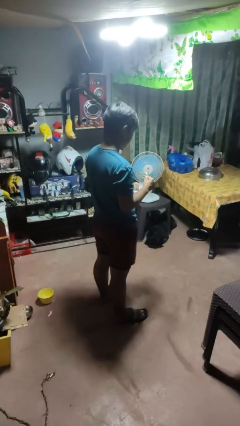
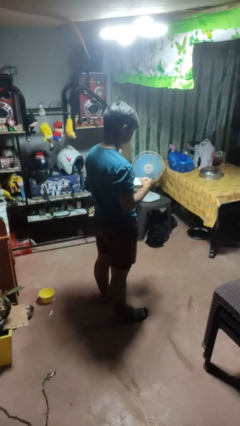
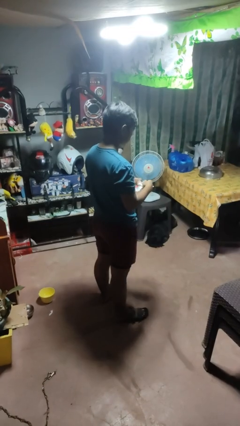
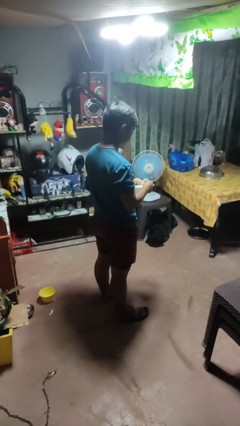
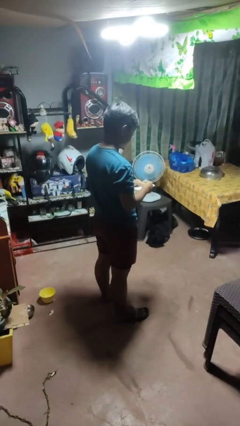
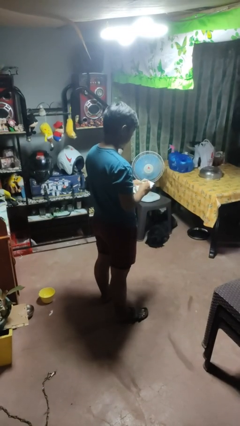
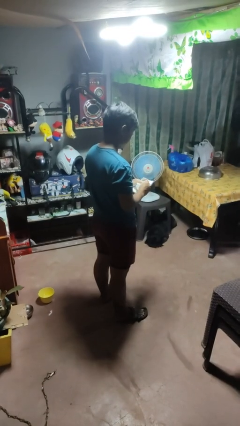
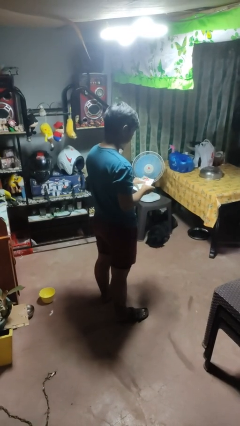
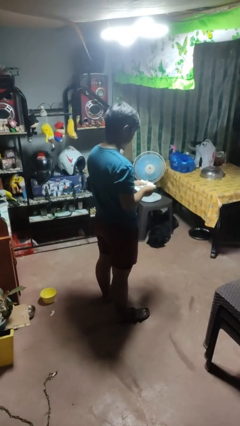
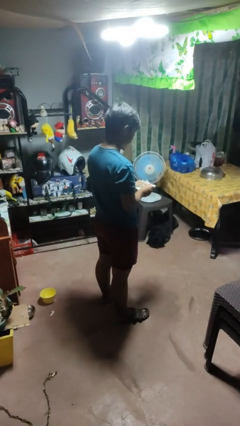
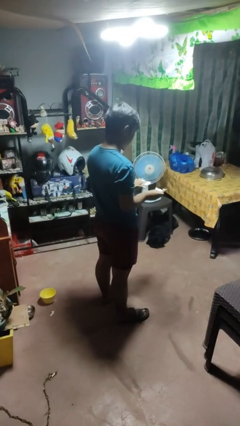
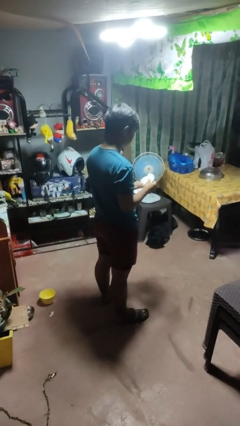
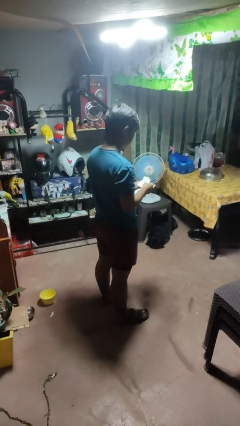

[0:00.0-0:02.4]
person tears paper

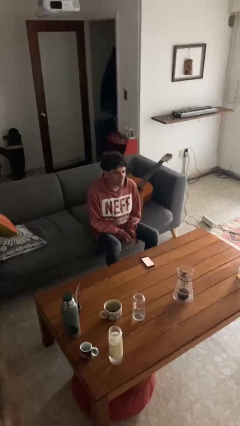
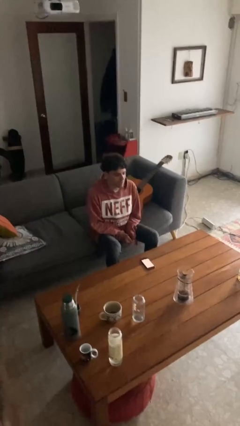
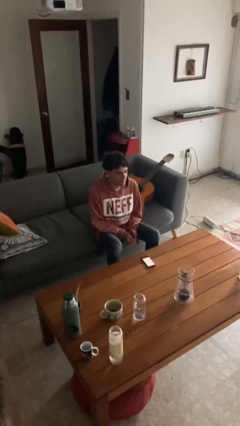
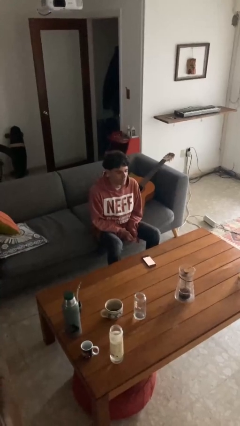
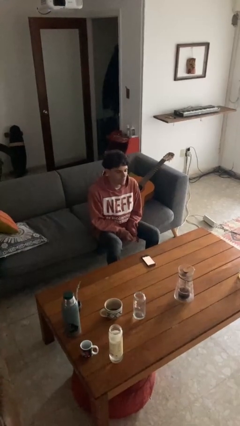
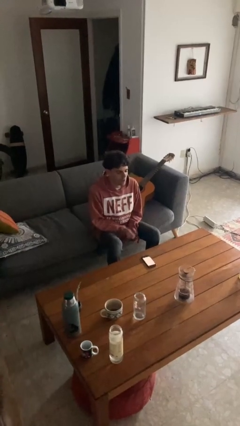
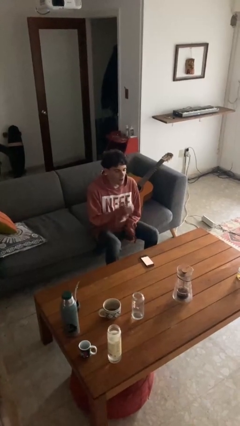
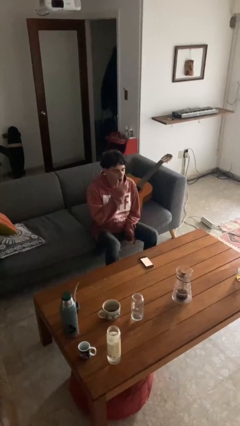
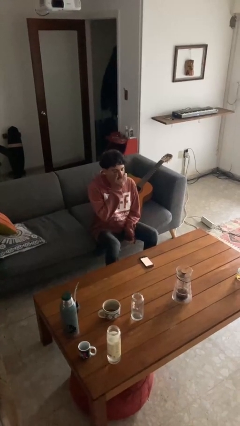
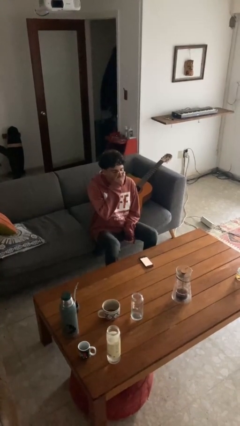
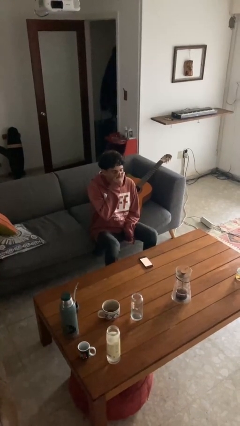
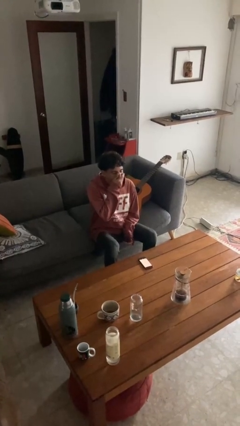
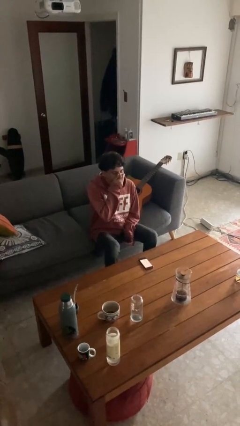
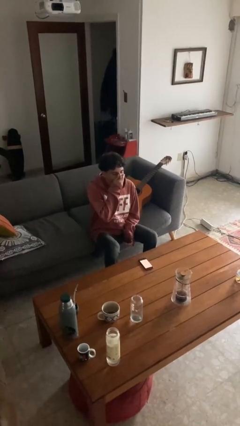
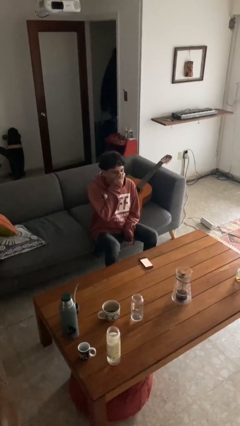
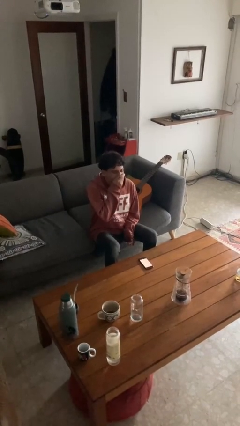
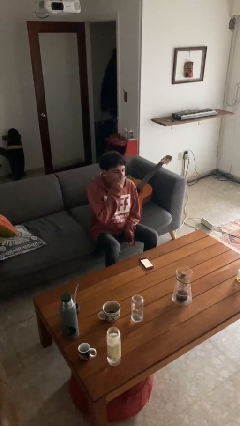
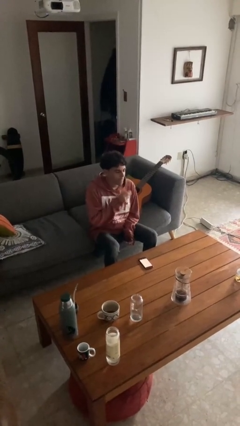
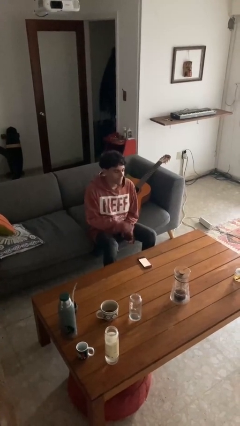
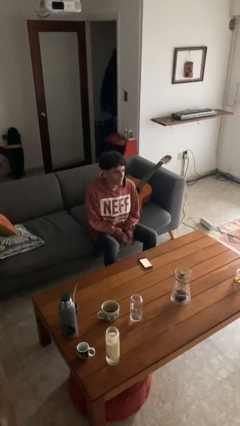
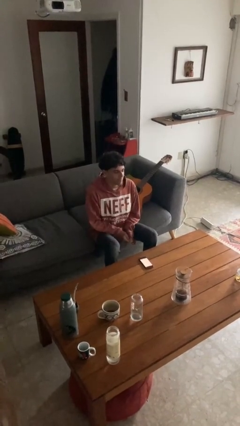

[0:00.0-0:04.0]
person yawns

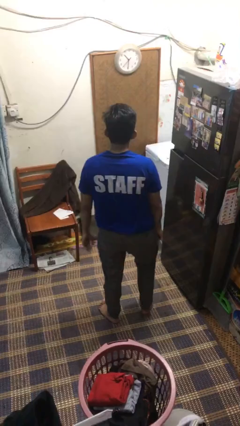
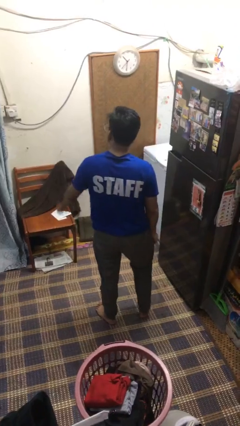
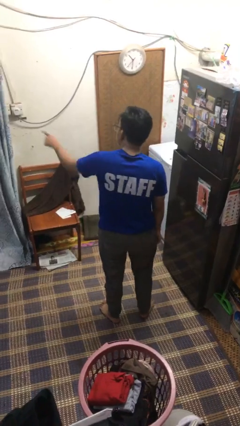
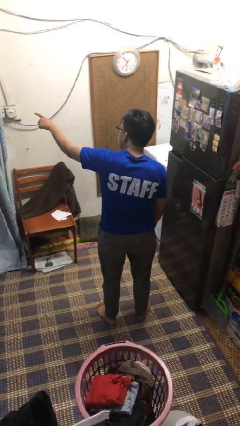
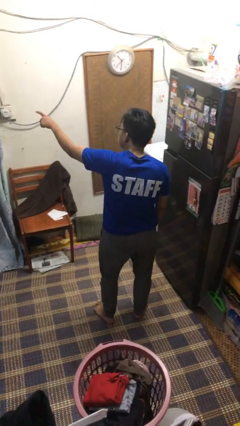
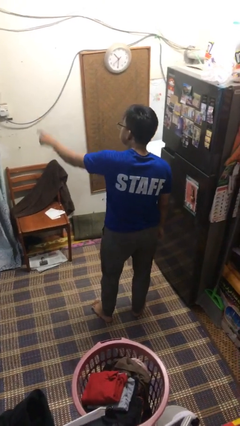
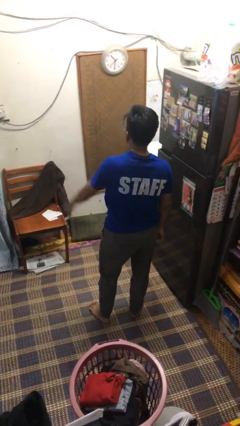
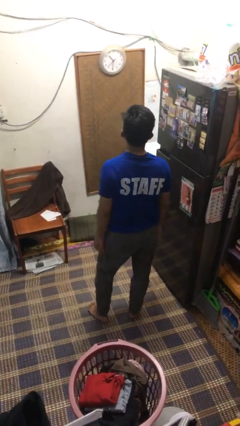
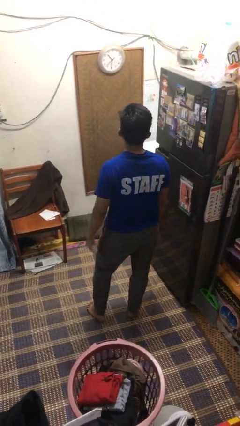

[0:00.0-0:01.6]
person points at person

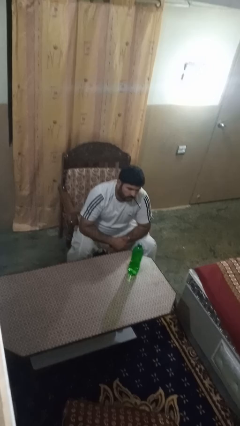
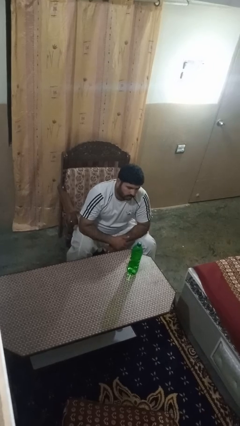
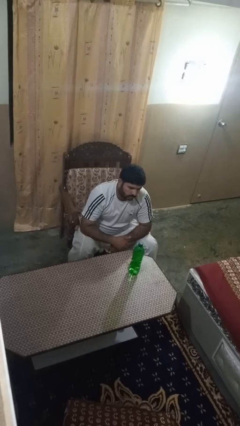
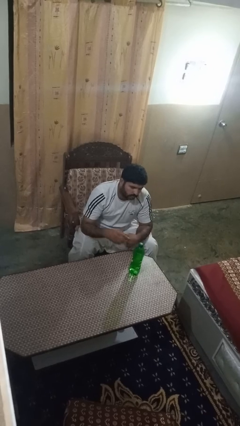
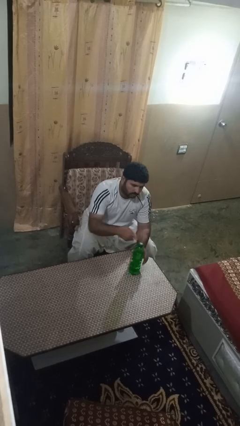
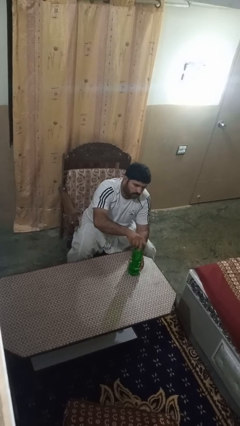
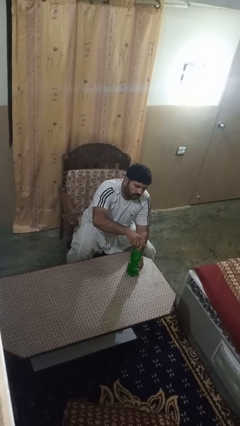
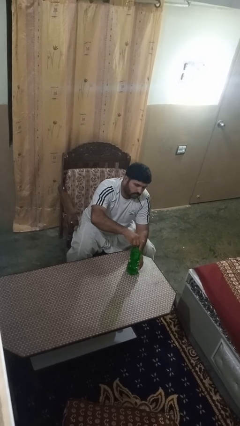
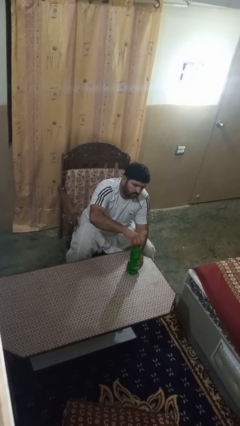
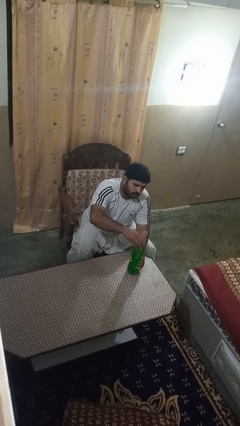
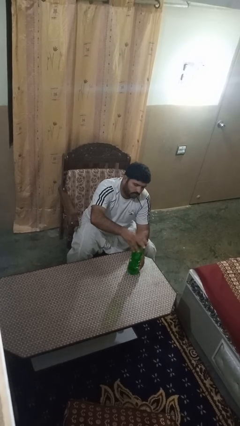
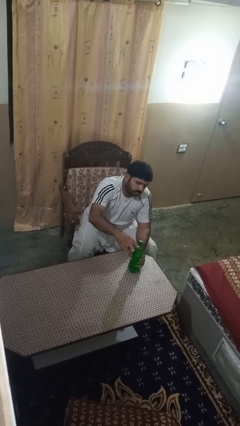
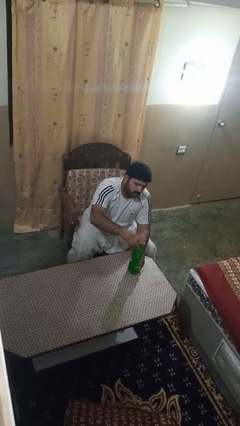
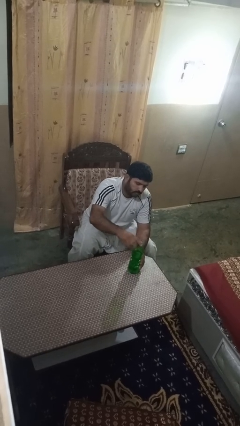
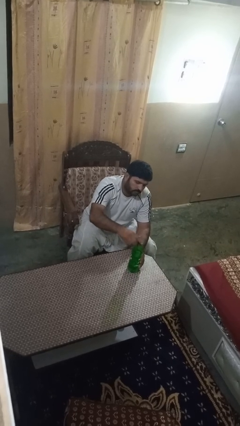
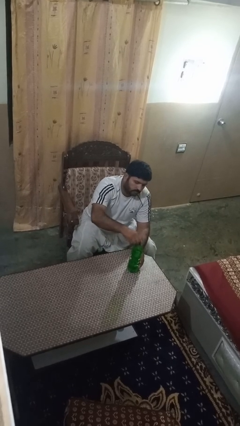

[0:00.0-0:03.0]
person unscrews lid from bottle

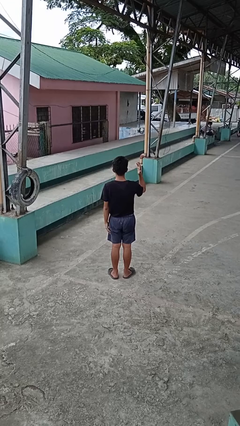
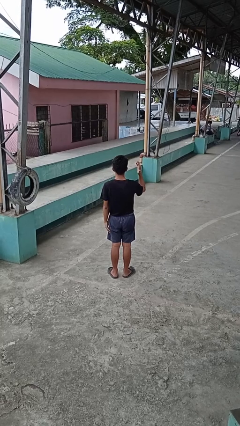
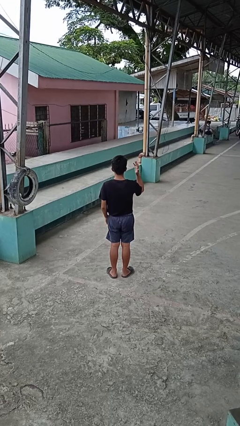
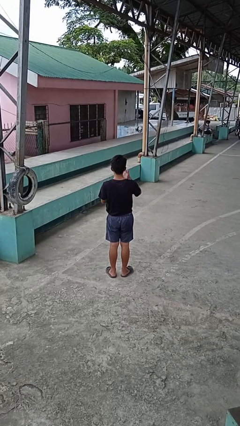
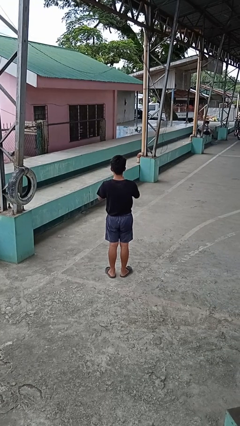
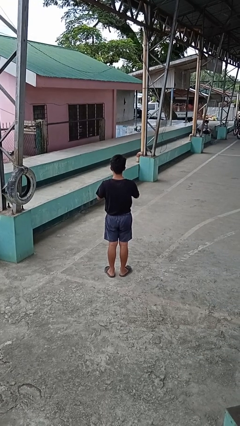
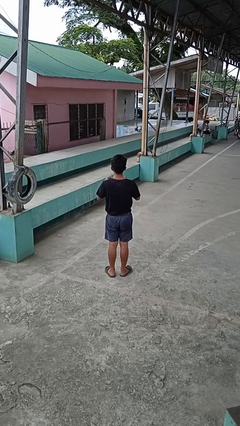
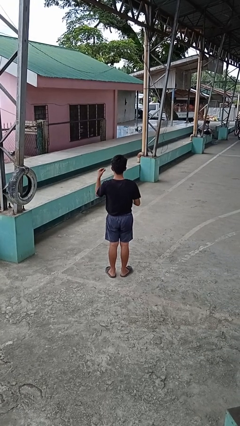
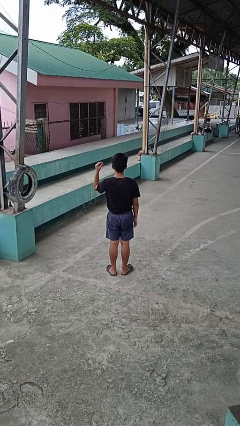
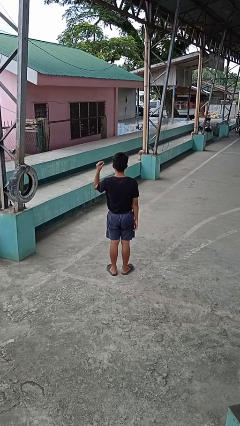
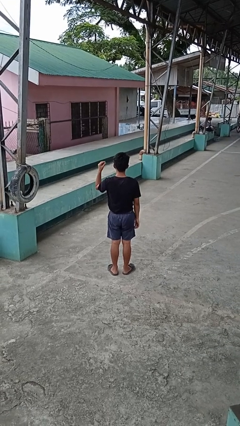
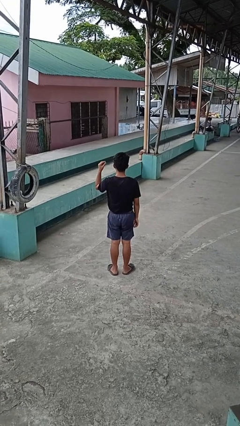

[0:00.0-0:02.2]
person takes off ring

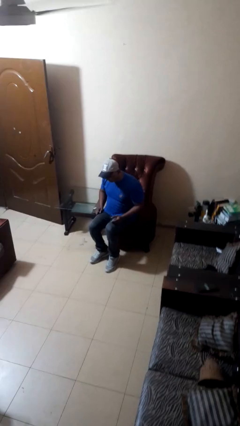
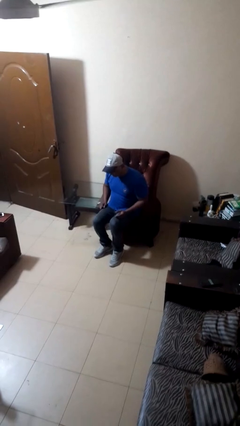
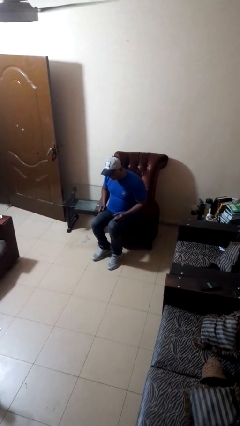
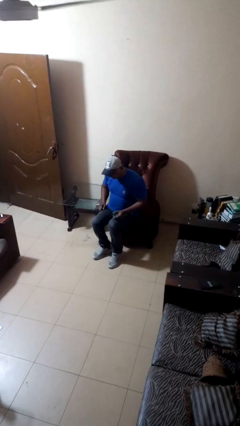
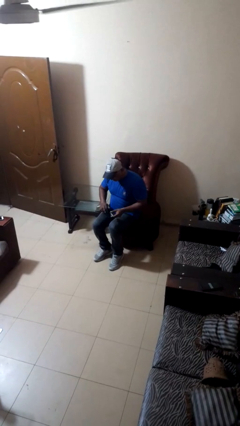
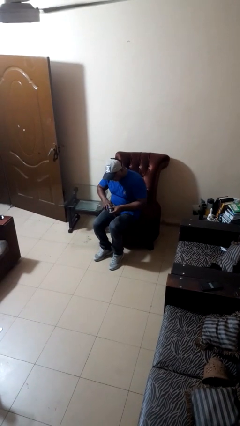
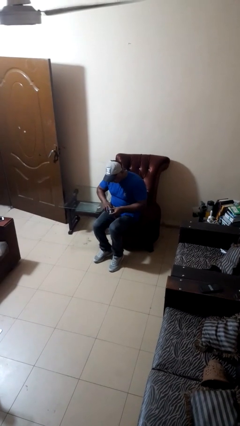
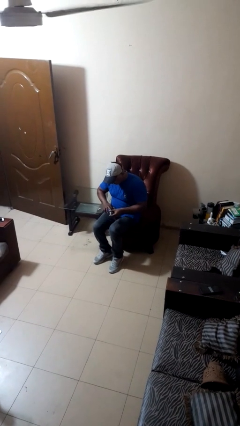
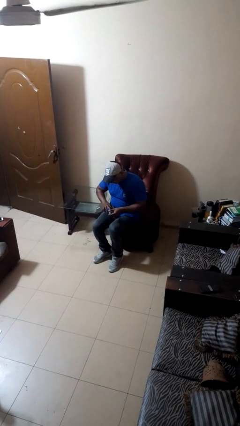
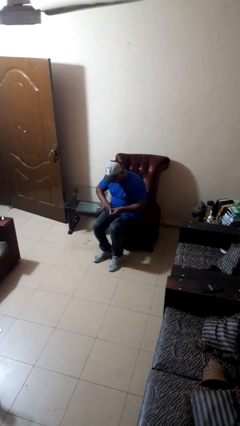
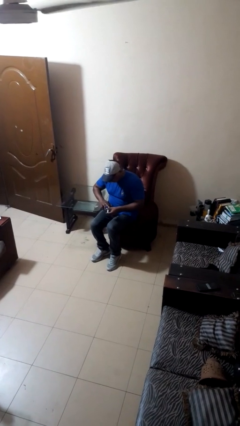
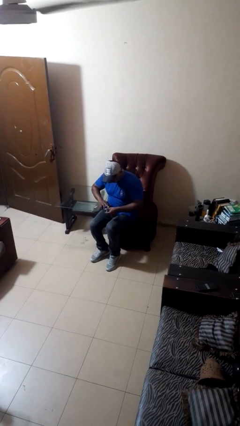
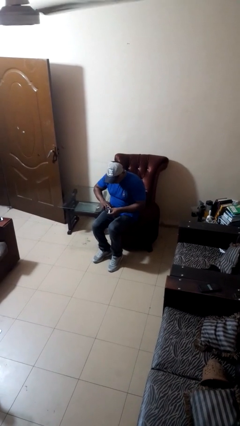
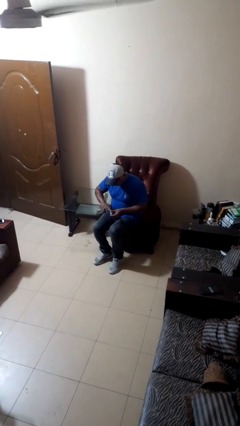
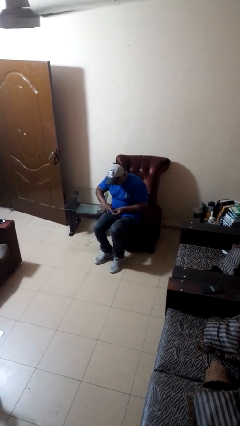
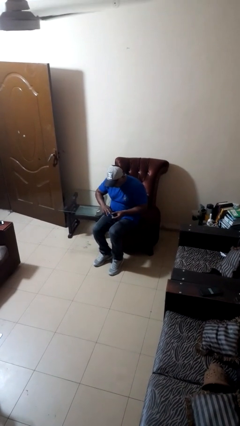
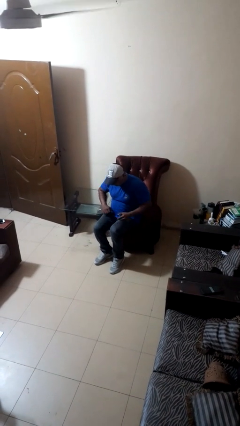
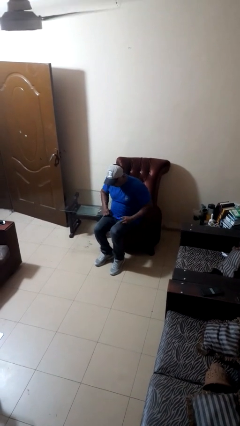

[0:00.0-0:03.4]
person clips fingernails

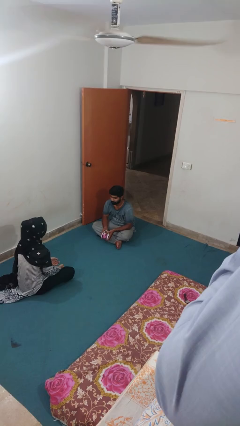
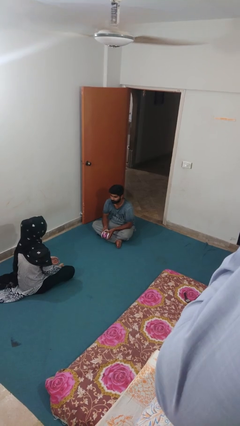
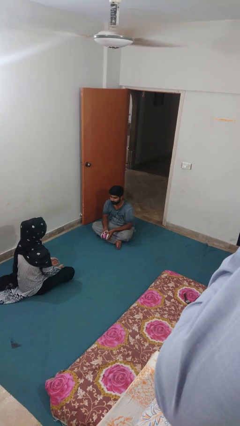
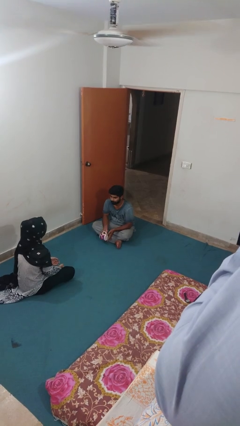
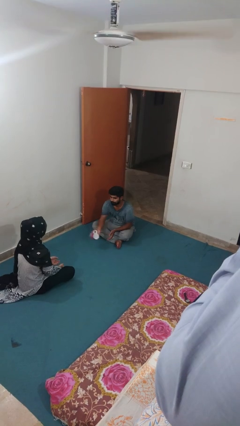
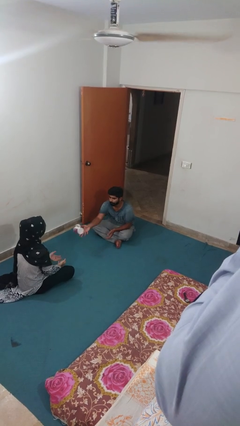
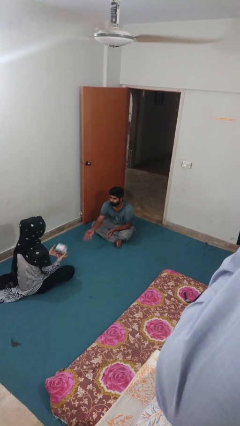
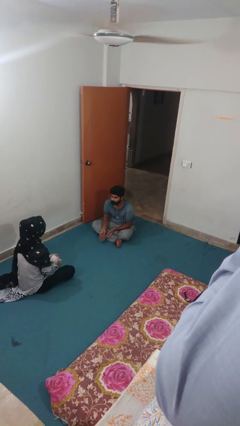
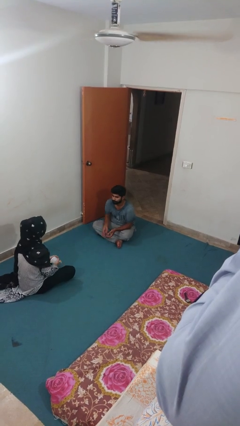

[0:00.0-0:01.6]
person throws object to person
